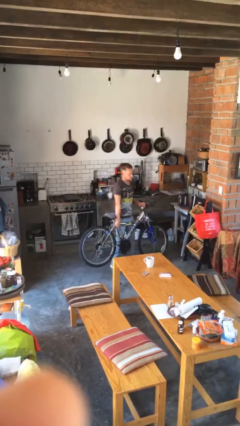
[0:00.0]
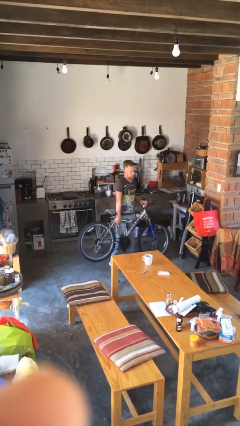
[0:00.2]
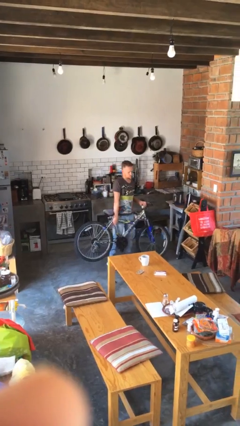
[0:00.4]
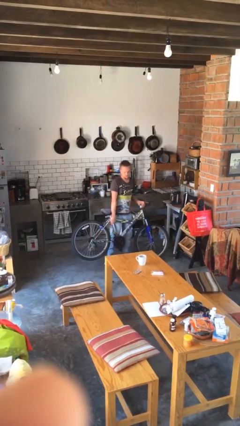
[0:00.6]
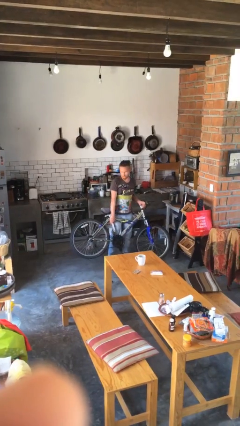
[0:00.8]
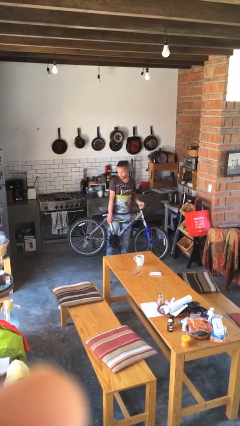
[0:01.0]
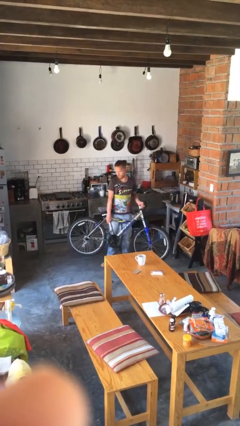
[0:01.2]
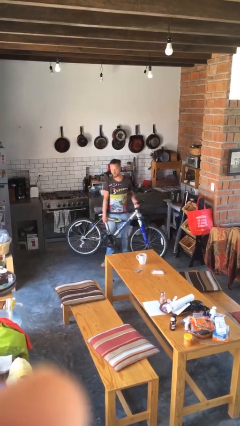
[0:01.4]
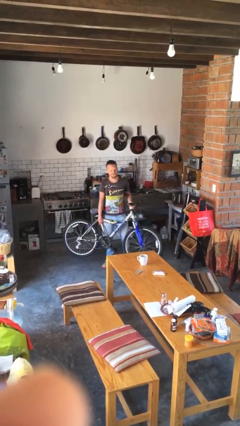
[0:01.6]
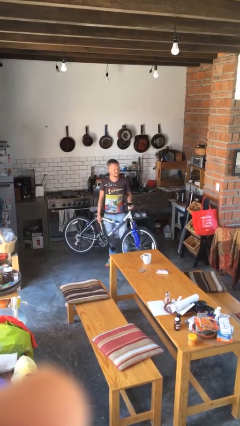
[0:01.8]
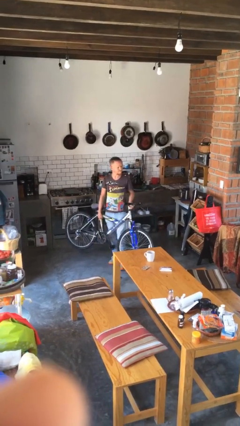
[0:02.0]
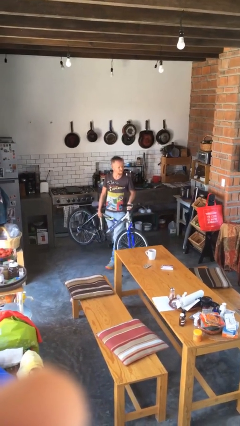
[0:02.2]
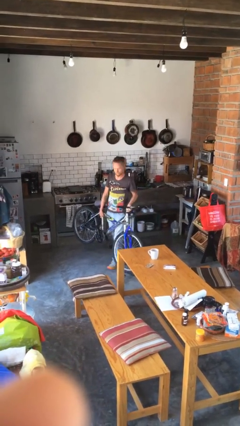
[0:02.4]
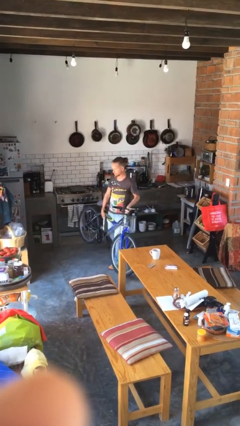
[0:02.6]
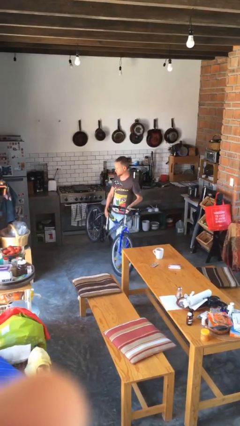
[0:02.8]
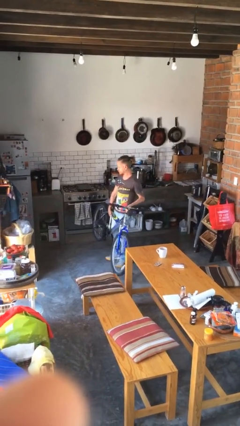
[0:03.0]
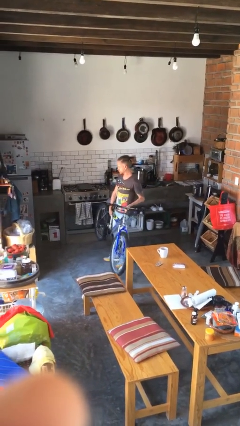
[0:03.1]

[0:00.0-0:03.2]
person carries bicycle

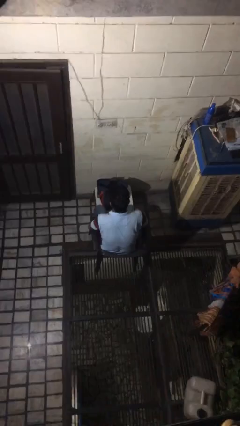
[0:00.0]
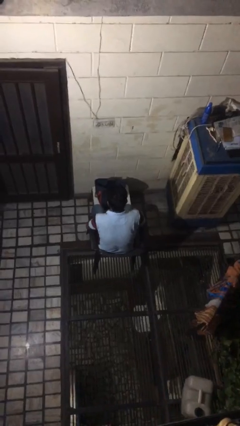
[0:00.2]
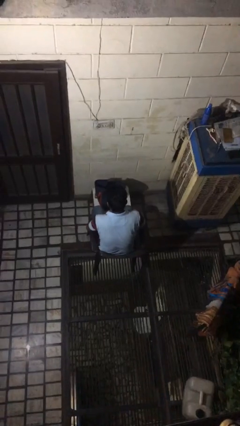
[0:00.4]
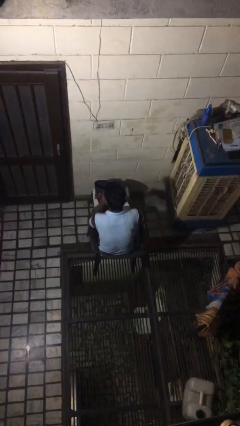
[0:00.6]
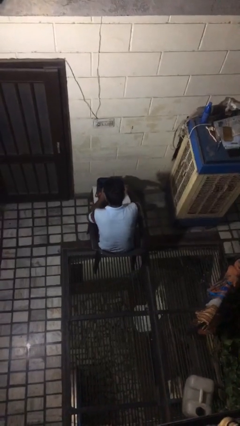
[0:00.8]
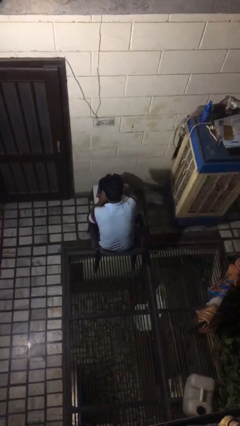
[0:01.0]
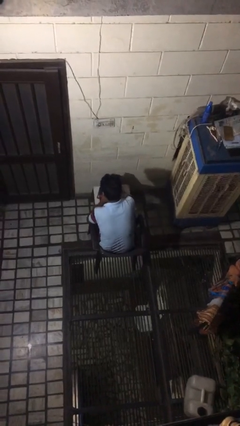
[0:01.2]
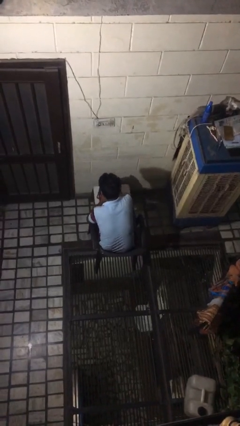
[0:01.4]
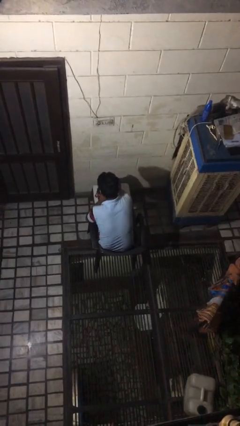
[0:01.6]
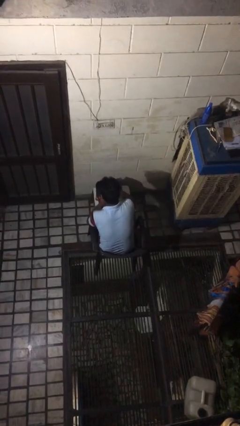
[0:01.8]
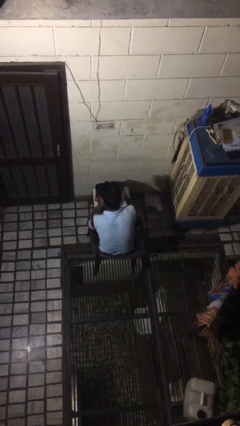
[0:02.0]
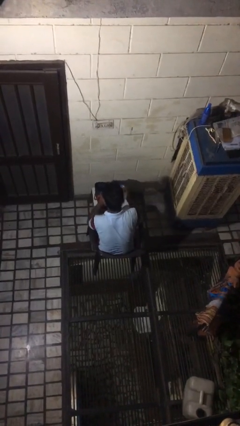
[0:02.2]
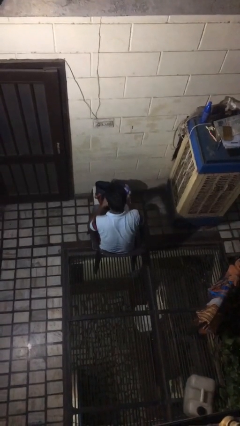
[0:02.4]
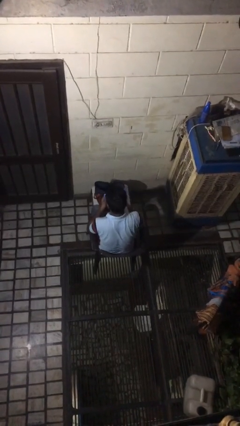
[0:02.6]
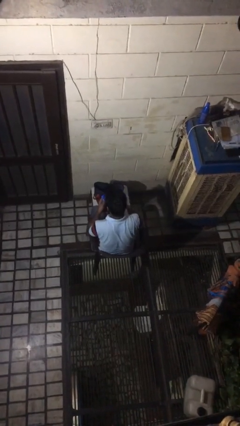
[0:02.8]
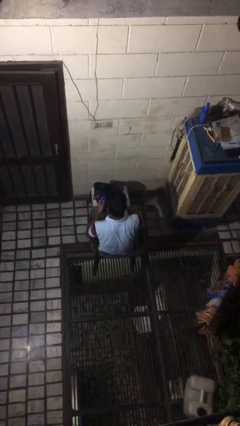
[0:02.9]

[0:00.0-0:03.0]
person takes object from bag

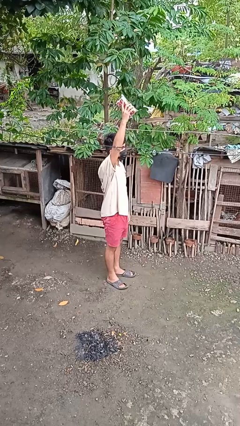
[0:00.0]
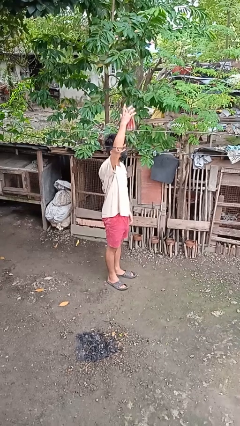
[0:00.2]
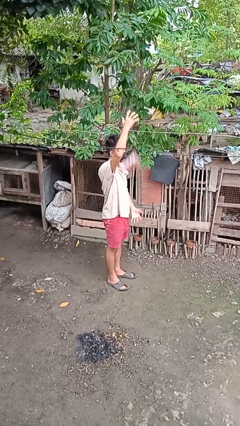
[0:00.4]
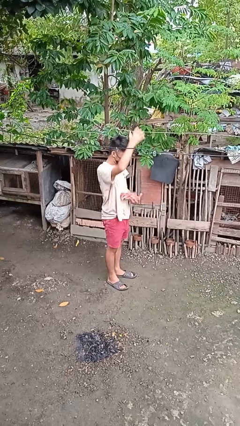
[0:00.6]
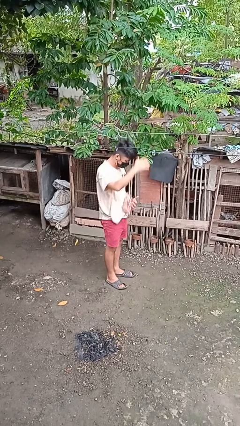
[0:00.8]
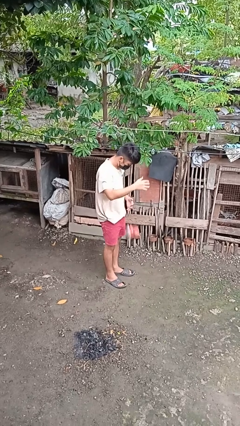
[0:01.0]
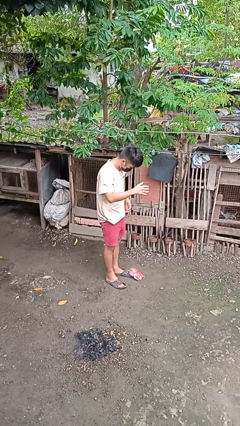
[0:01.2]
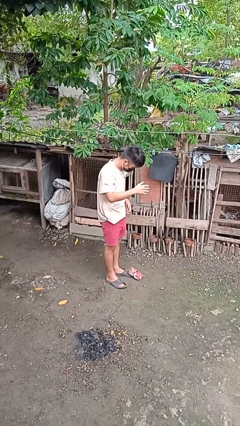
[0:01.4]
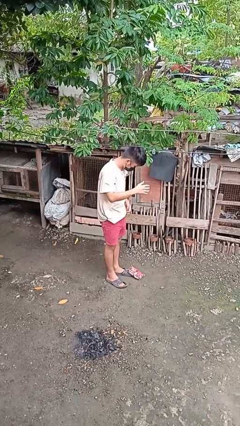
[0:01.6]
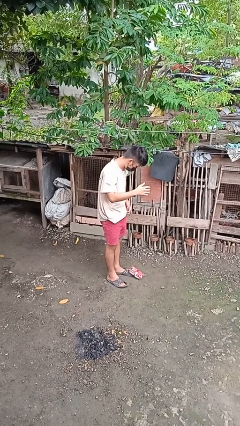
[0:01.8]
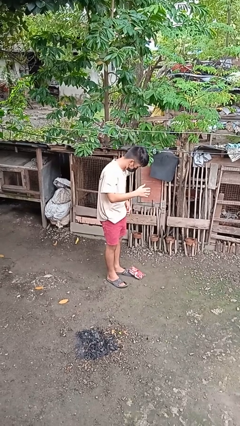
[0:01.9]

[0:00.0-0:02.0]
person drops object

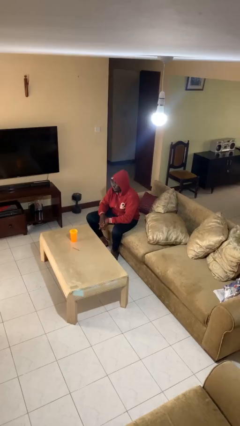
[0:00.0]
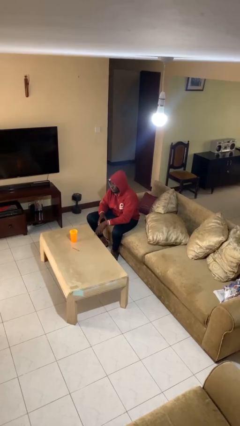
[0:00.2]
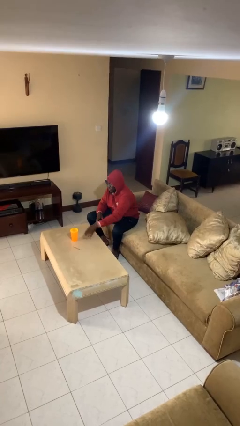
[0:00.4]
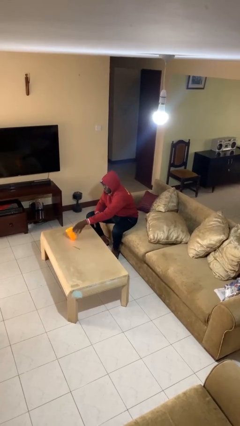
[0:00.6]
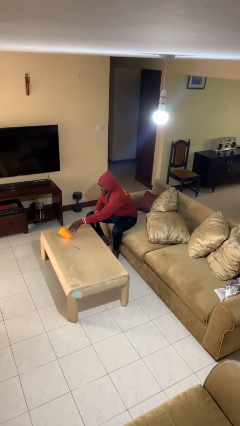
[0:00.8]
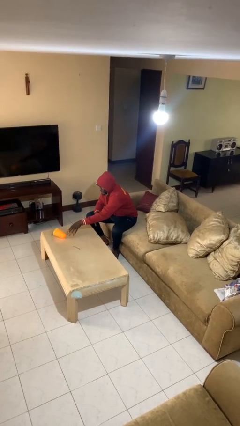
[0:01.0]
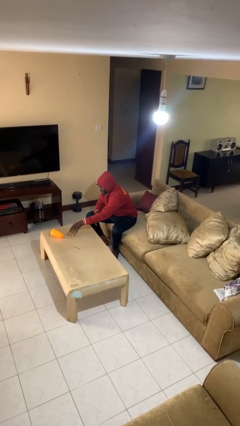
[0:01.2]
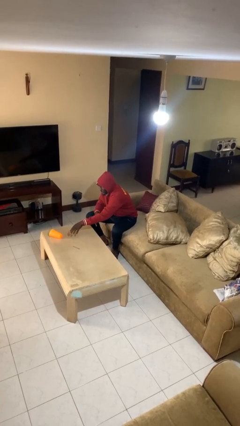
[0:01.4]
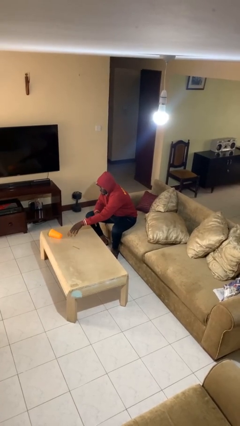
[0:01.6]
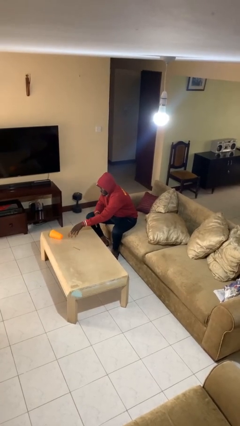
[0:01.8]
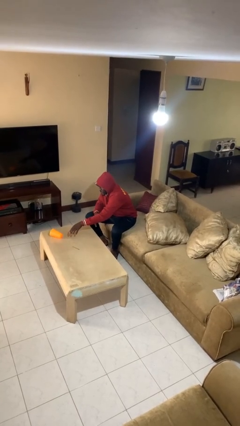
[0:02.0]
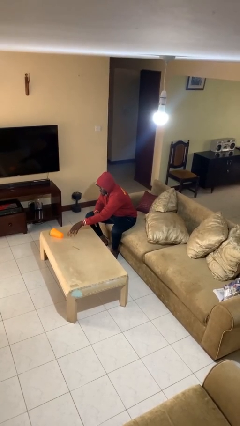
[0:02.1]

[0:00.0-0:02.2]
person knocks over glass

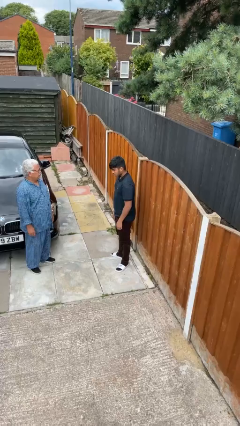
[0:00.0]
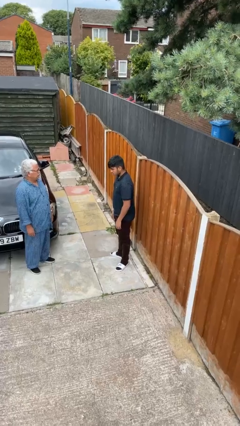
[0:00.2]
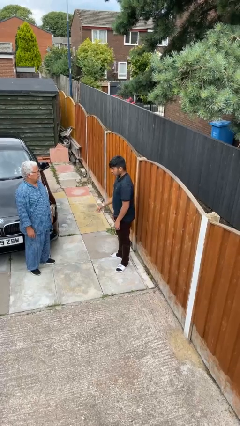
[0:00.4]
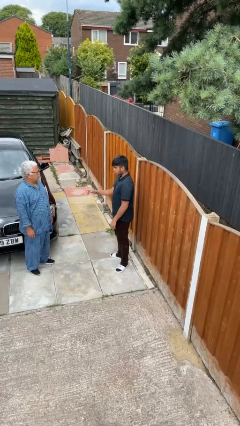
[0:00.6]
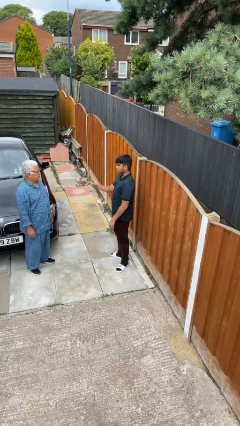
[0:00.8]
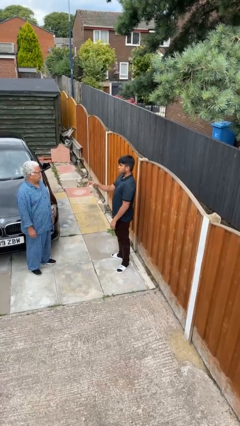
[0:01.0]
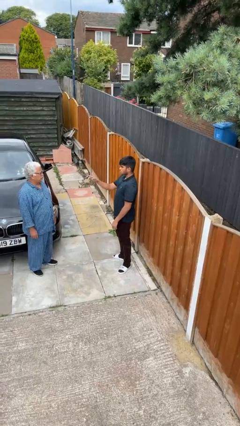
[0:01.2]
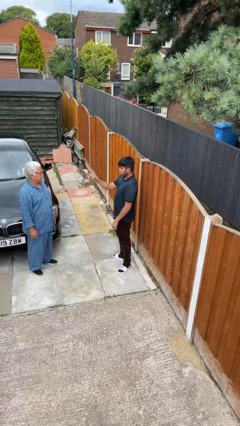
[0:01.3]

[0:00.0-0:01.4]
person points at person

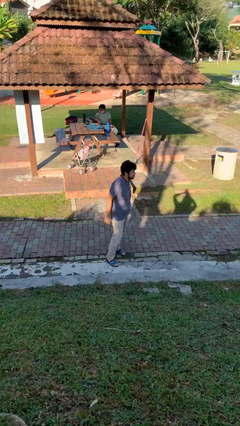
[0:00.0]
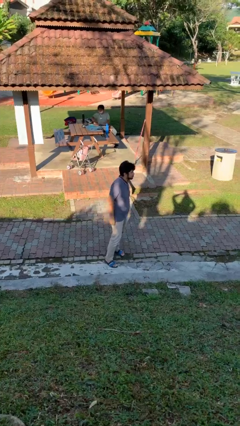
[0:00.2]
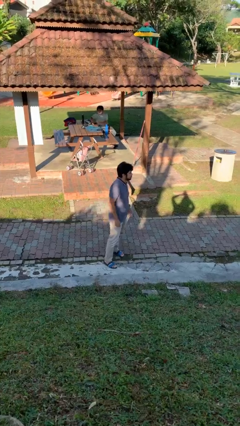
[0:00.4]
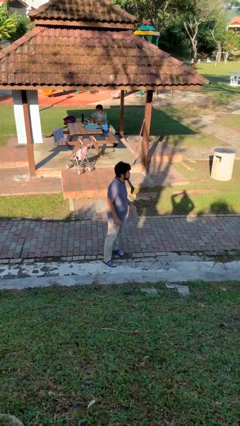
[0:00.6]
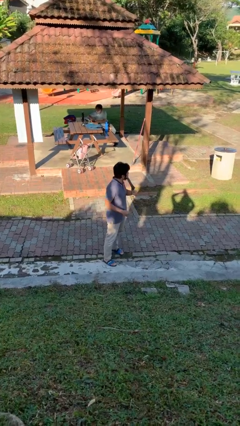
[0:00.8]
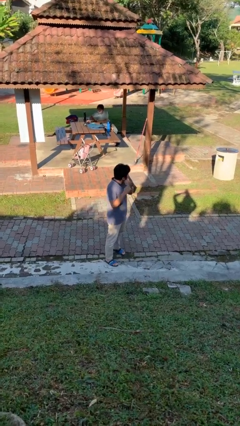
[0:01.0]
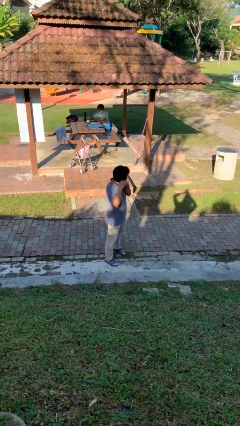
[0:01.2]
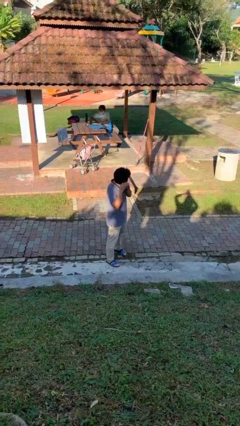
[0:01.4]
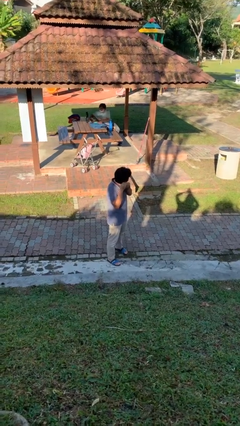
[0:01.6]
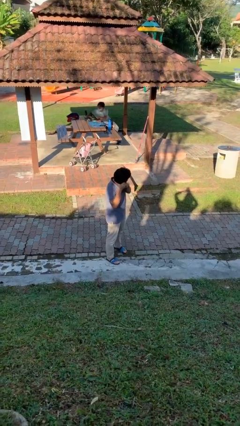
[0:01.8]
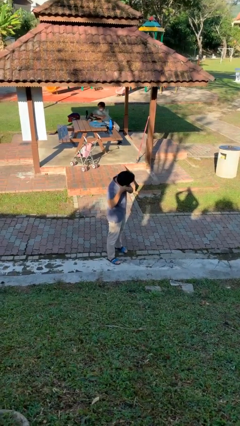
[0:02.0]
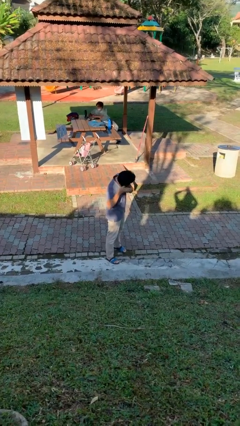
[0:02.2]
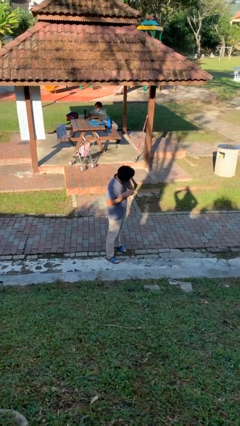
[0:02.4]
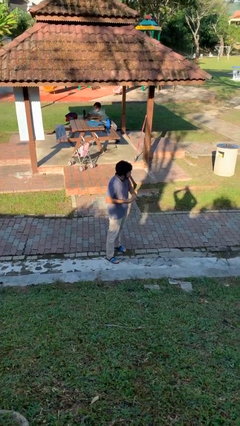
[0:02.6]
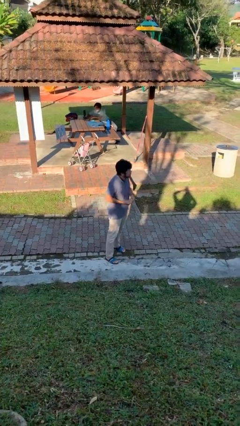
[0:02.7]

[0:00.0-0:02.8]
person takes off earrings

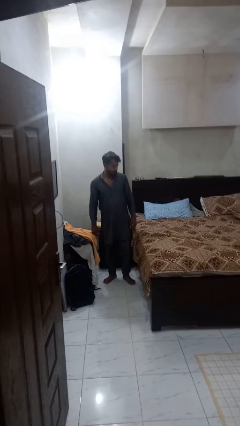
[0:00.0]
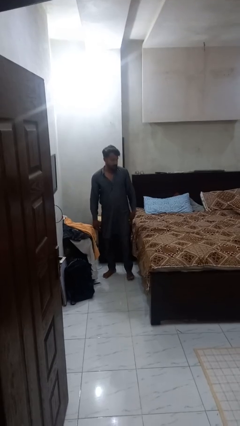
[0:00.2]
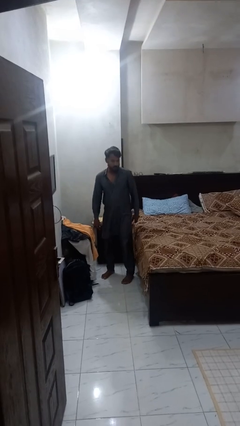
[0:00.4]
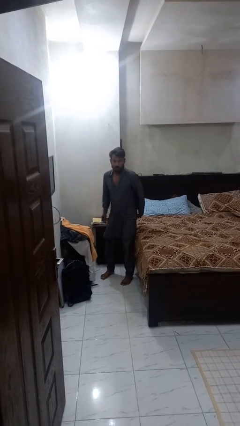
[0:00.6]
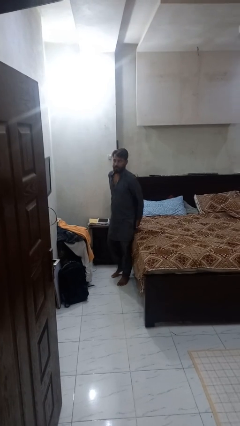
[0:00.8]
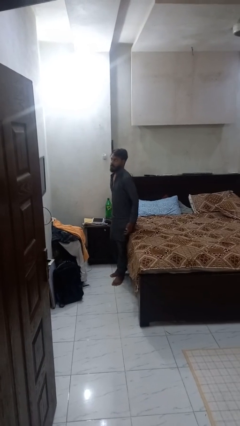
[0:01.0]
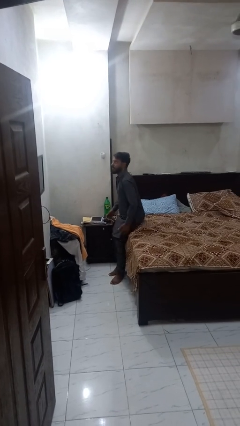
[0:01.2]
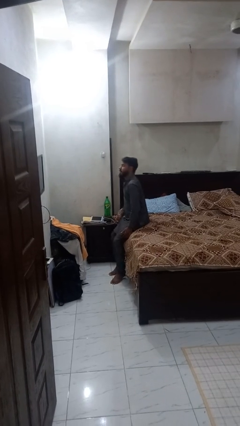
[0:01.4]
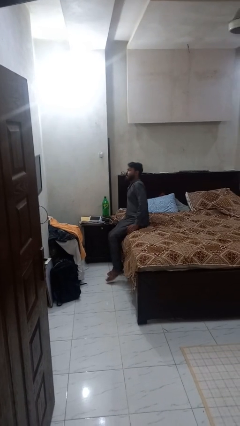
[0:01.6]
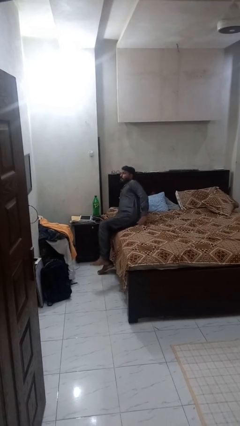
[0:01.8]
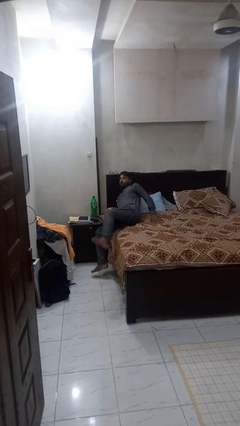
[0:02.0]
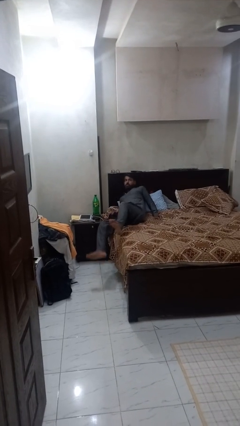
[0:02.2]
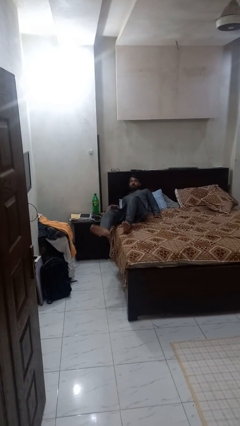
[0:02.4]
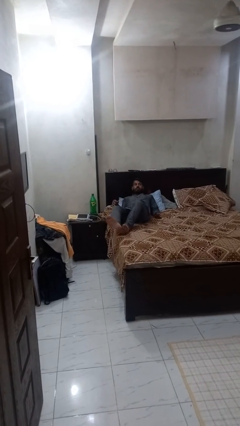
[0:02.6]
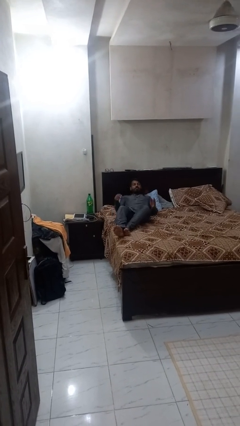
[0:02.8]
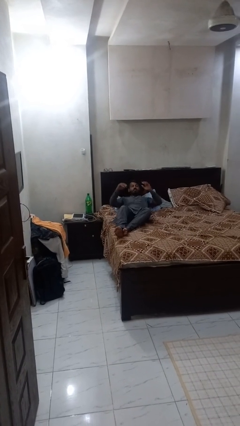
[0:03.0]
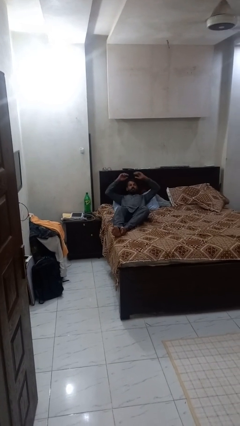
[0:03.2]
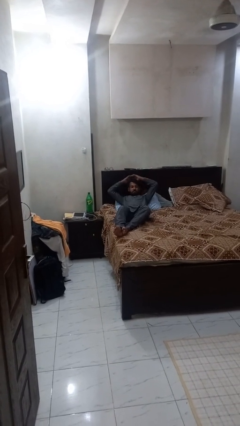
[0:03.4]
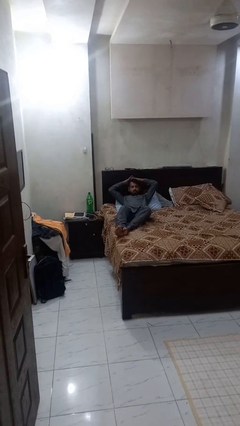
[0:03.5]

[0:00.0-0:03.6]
person lies down on bed
